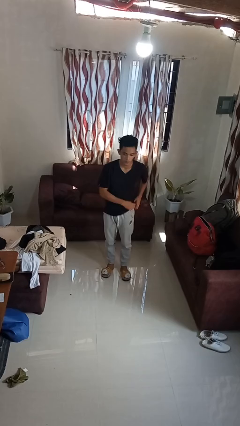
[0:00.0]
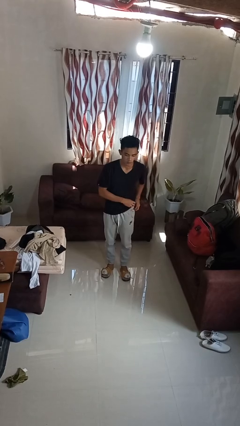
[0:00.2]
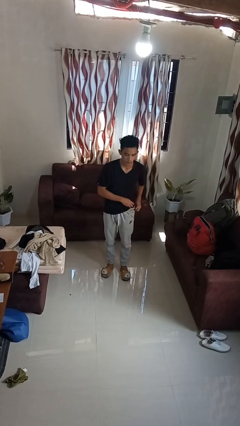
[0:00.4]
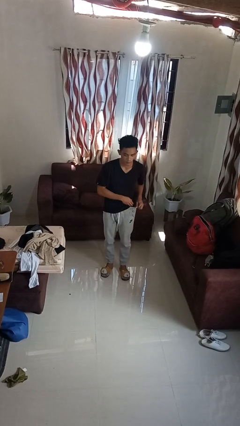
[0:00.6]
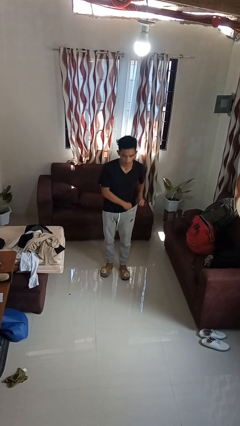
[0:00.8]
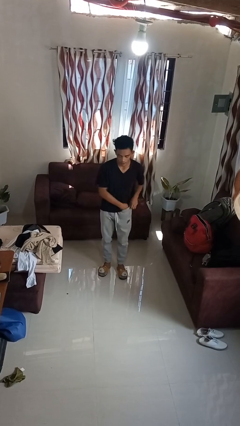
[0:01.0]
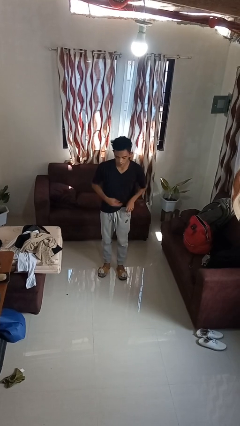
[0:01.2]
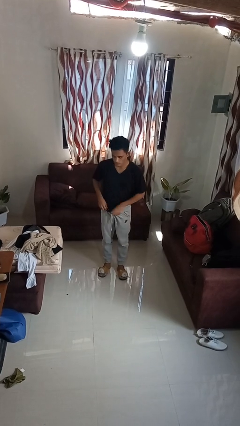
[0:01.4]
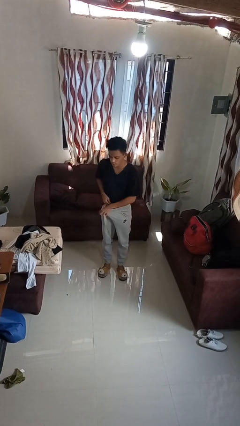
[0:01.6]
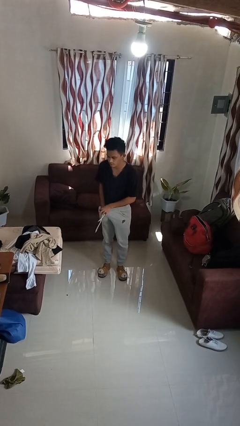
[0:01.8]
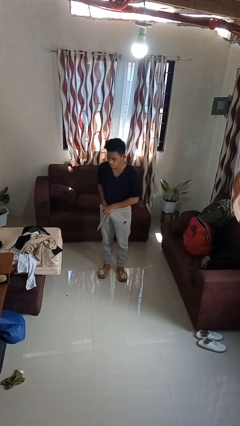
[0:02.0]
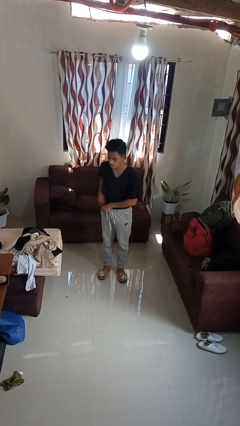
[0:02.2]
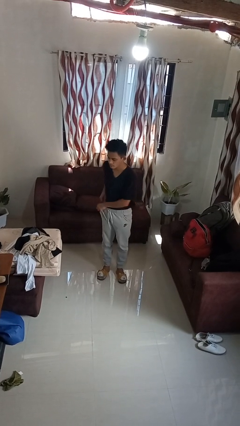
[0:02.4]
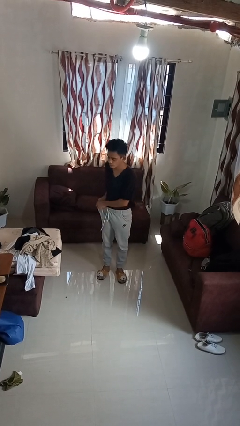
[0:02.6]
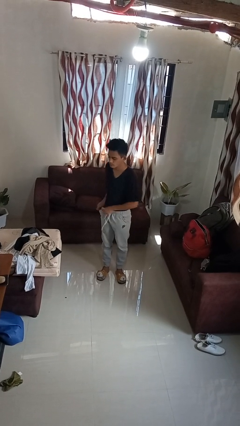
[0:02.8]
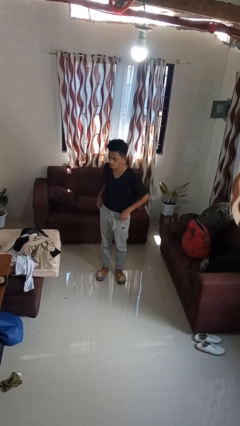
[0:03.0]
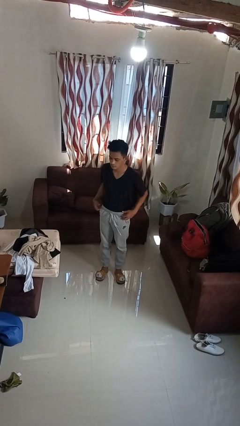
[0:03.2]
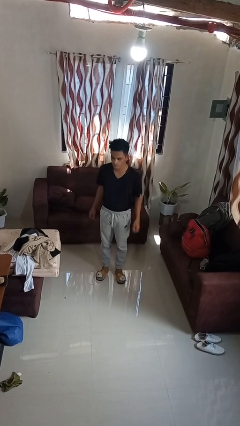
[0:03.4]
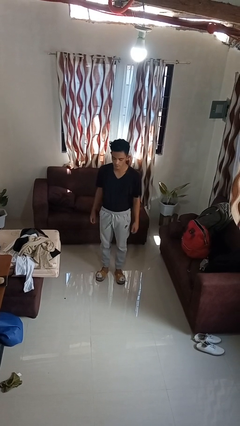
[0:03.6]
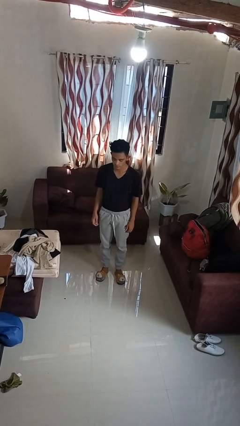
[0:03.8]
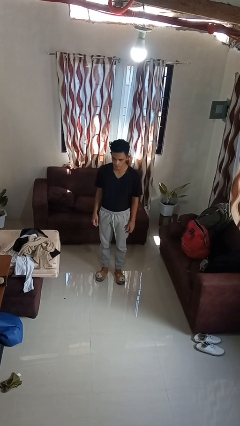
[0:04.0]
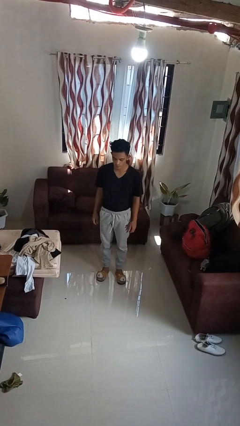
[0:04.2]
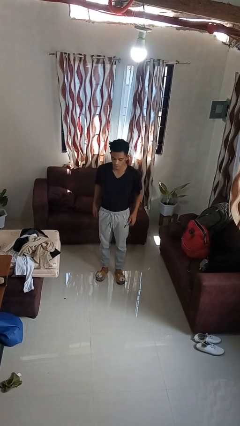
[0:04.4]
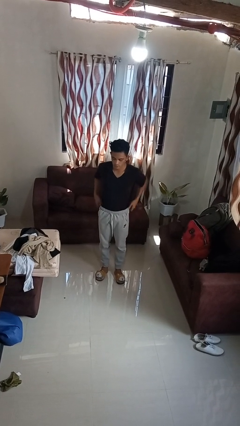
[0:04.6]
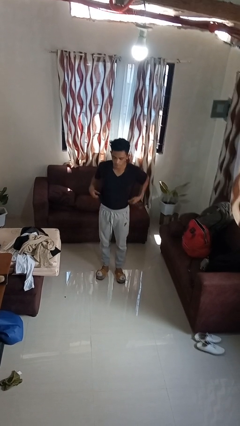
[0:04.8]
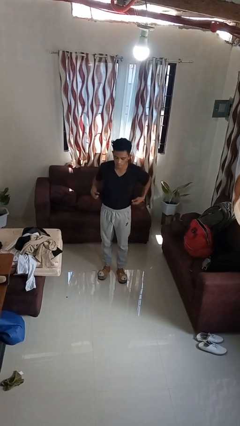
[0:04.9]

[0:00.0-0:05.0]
person tucks in shirt

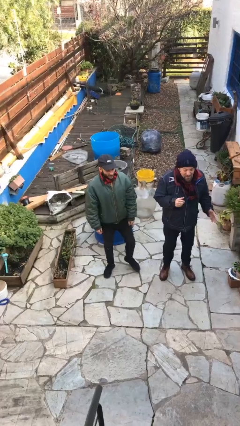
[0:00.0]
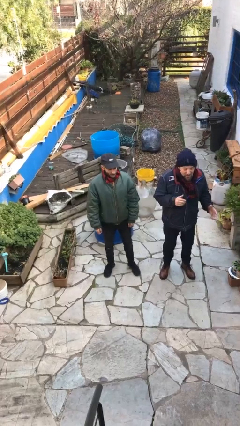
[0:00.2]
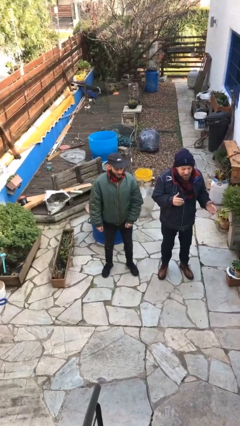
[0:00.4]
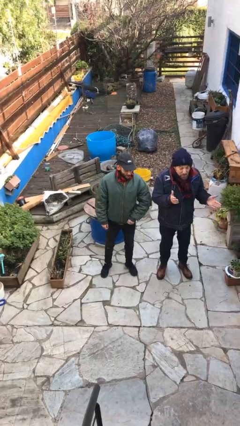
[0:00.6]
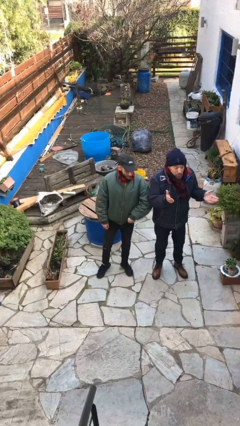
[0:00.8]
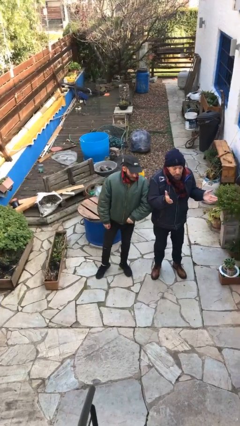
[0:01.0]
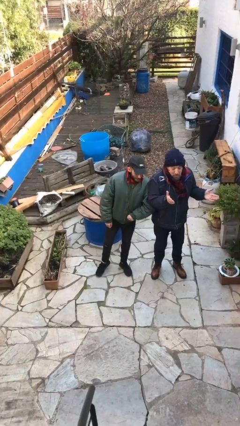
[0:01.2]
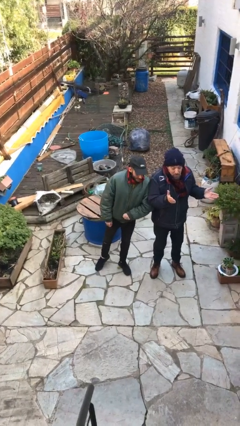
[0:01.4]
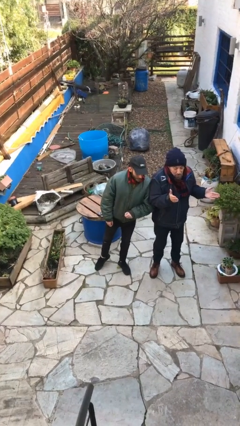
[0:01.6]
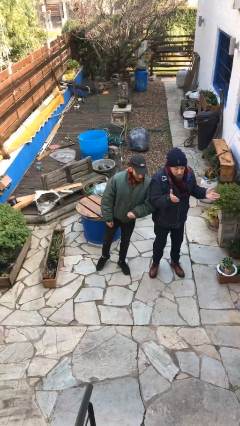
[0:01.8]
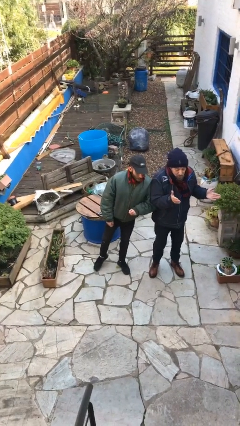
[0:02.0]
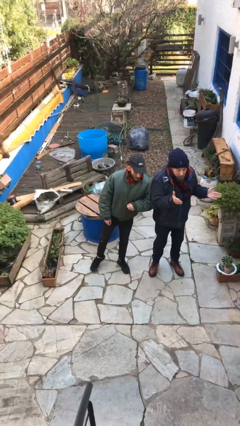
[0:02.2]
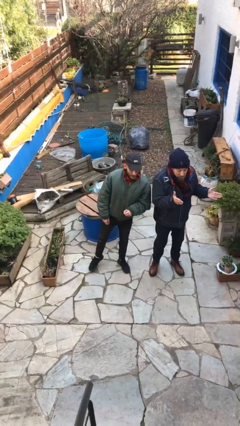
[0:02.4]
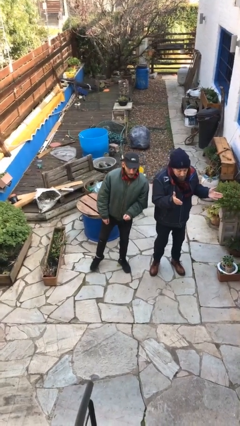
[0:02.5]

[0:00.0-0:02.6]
person nudges person with elbow

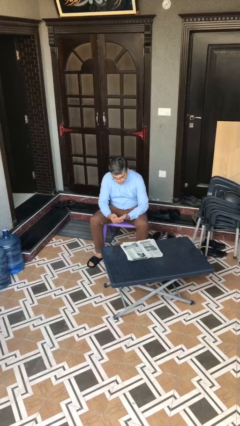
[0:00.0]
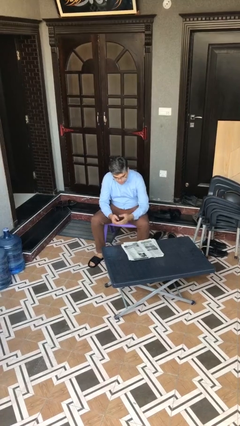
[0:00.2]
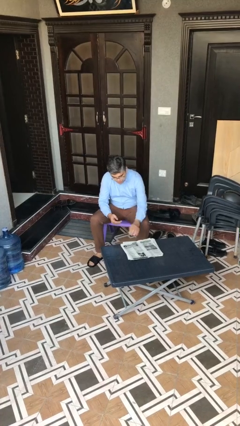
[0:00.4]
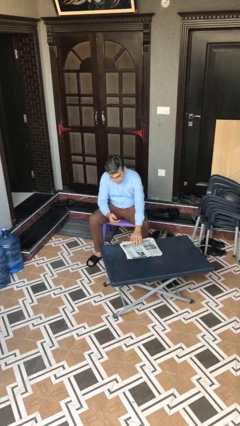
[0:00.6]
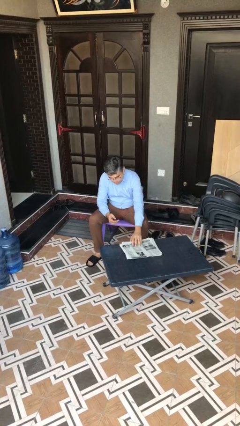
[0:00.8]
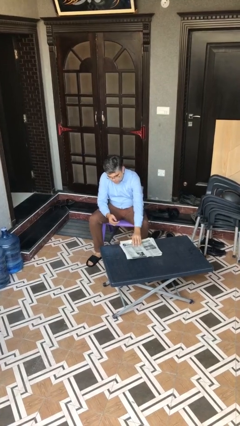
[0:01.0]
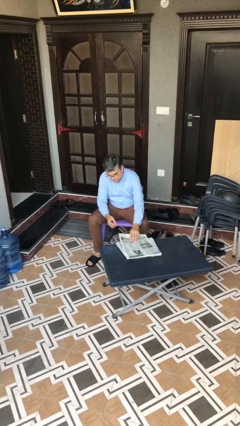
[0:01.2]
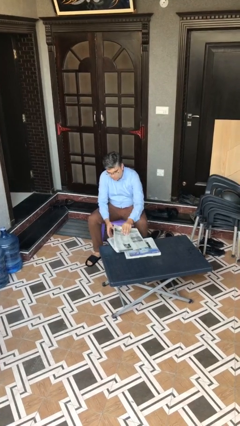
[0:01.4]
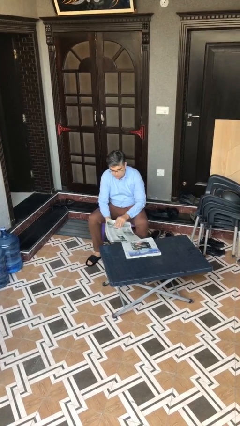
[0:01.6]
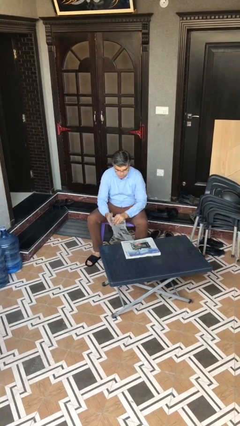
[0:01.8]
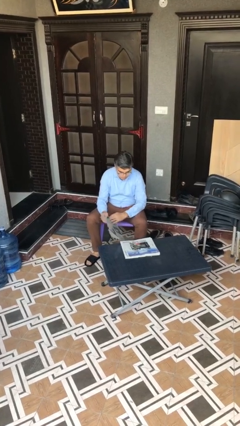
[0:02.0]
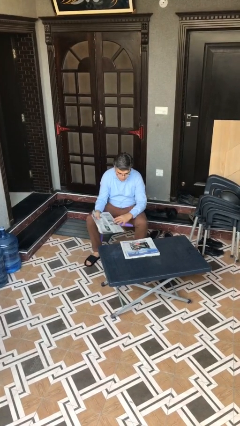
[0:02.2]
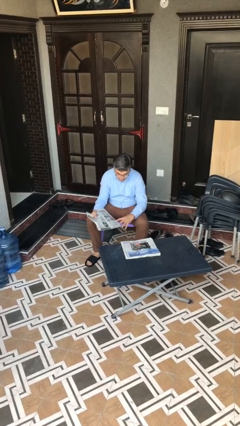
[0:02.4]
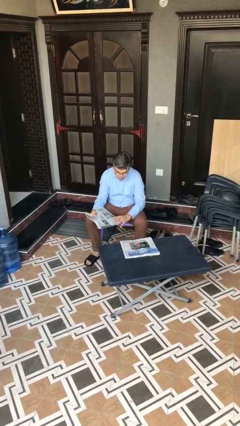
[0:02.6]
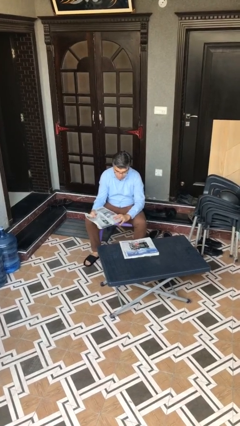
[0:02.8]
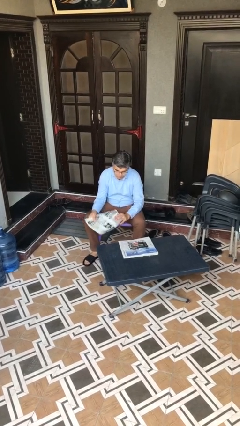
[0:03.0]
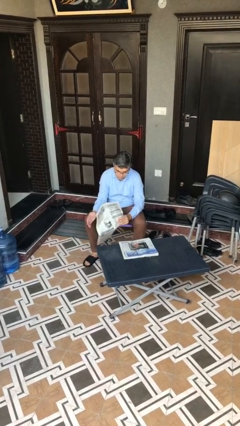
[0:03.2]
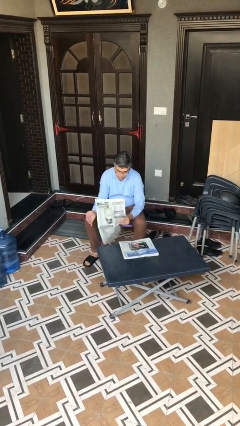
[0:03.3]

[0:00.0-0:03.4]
person picks up object from table

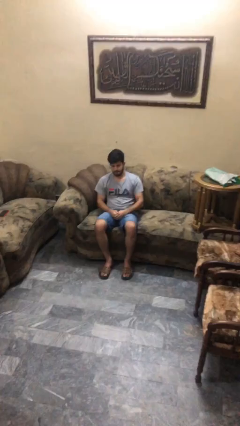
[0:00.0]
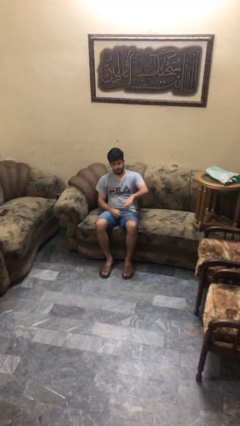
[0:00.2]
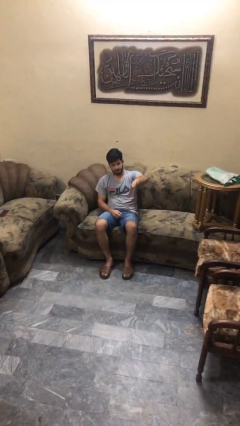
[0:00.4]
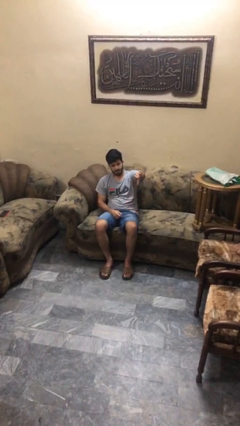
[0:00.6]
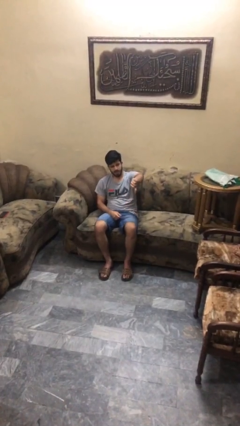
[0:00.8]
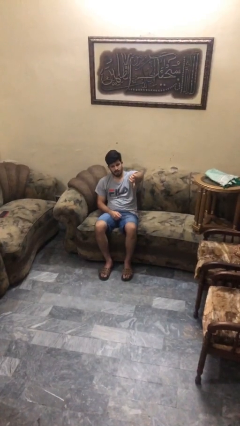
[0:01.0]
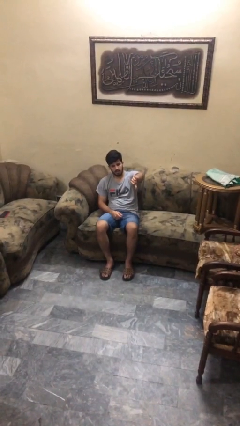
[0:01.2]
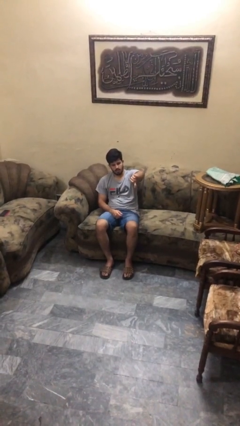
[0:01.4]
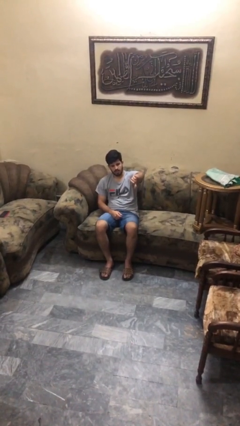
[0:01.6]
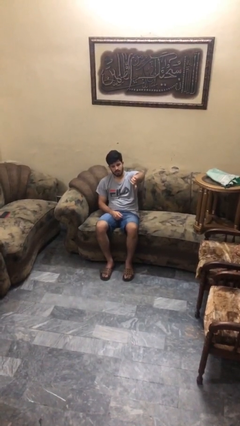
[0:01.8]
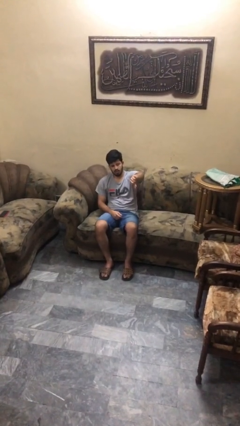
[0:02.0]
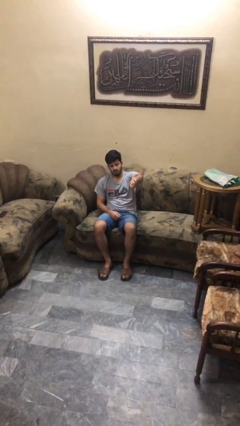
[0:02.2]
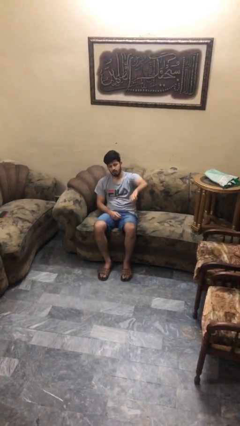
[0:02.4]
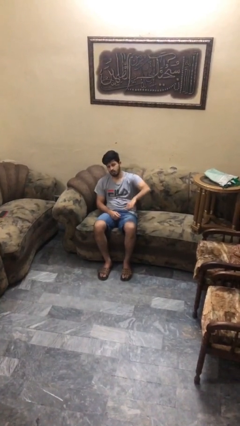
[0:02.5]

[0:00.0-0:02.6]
person gestures thumbs down

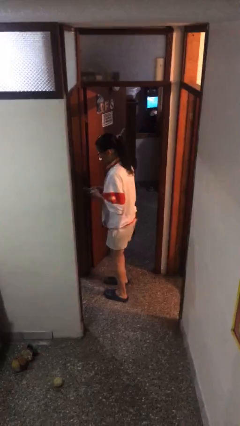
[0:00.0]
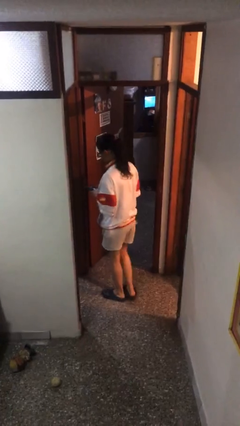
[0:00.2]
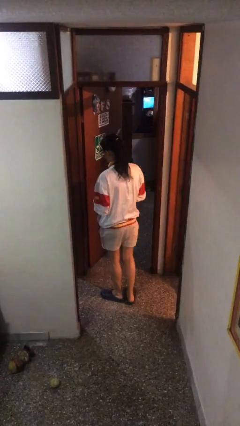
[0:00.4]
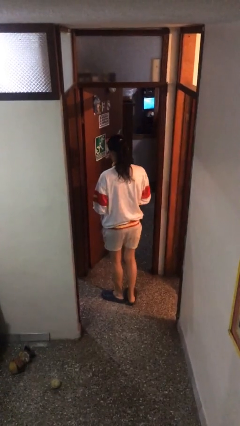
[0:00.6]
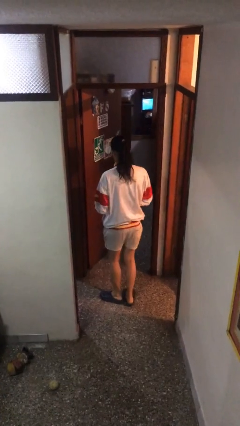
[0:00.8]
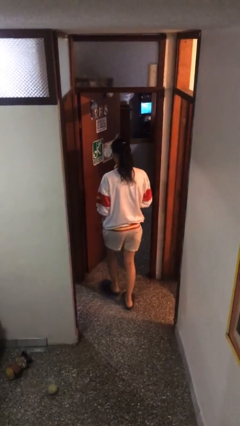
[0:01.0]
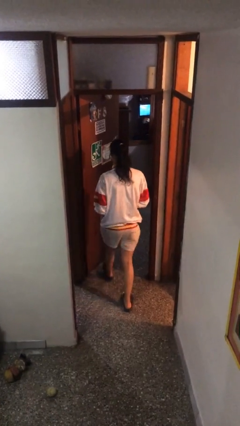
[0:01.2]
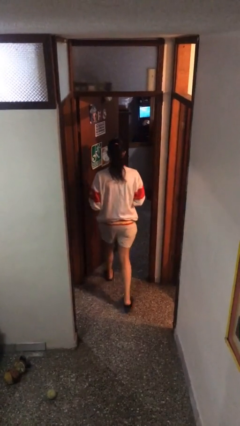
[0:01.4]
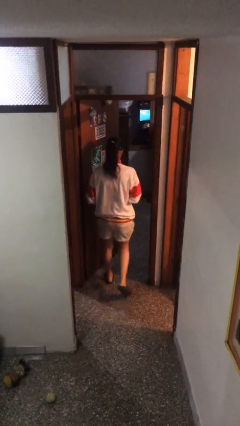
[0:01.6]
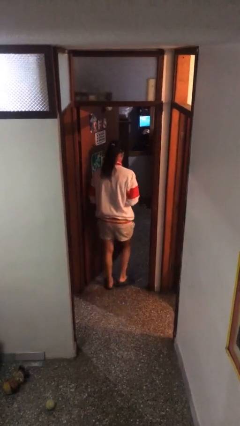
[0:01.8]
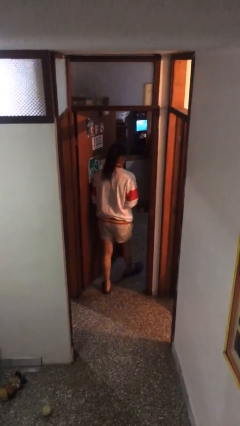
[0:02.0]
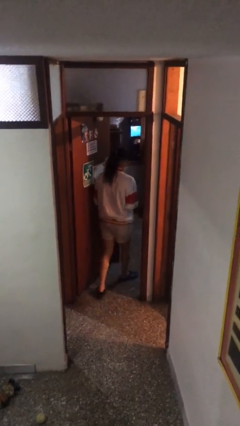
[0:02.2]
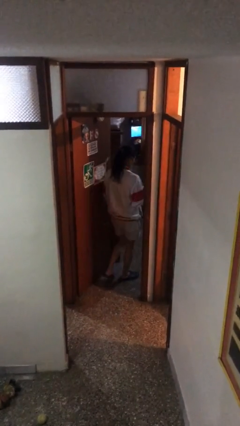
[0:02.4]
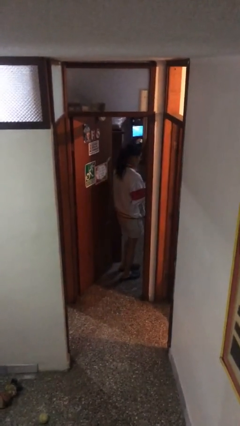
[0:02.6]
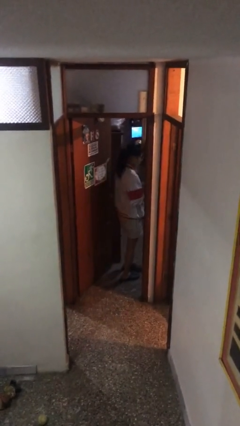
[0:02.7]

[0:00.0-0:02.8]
person exits scene through structure

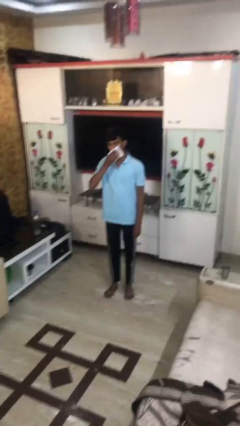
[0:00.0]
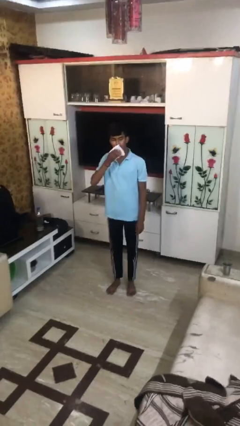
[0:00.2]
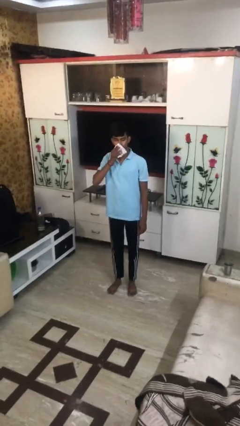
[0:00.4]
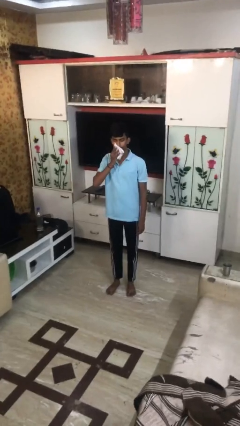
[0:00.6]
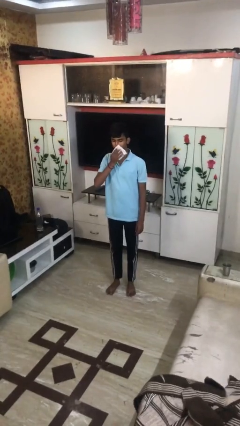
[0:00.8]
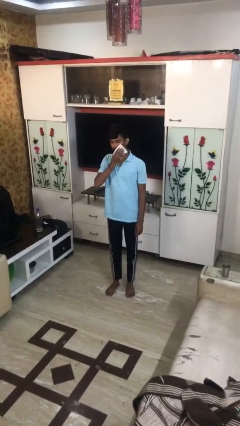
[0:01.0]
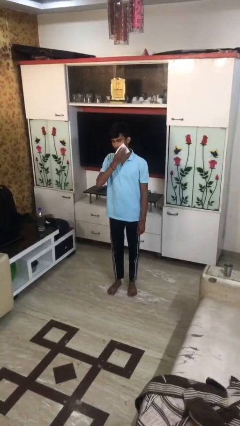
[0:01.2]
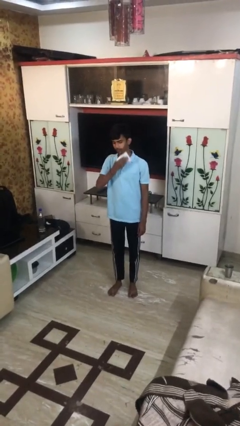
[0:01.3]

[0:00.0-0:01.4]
person wipes mouth with napkin
